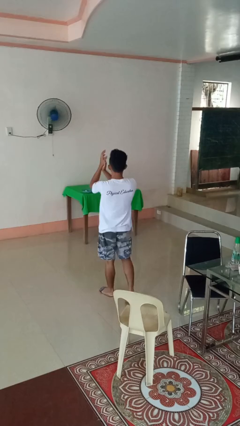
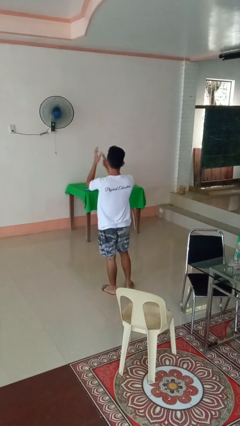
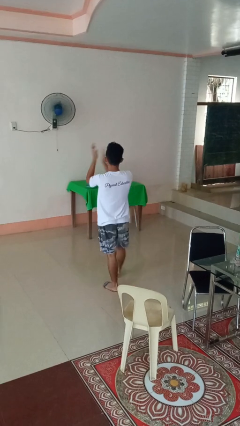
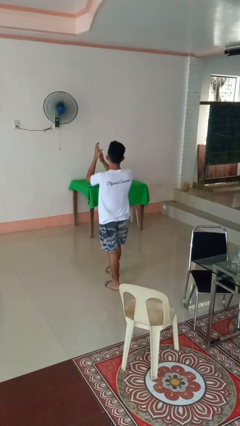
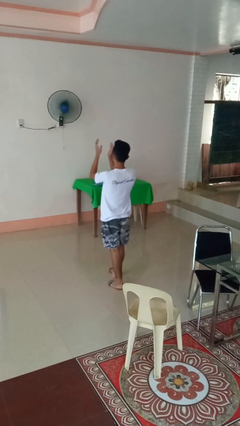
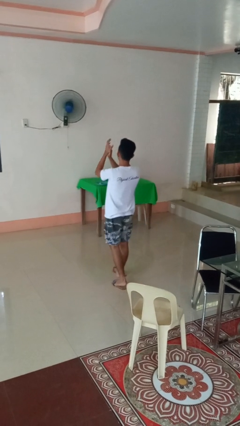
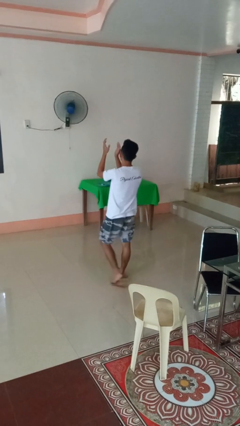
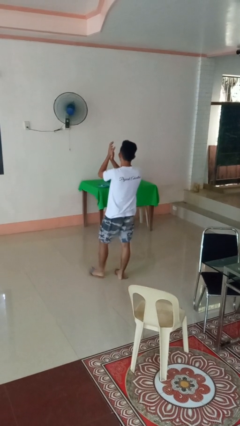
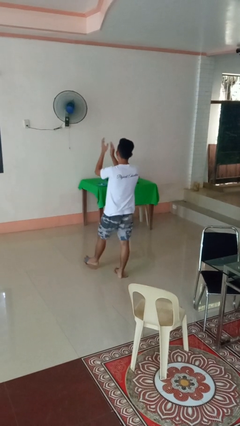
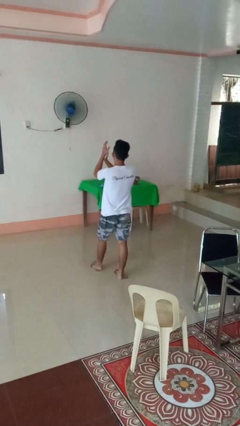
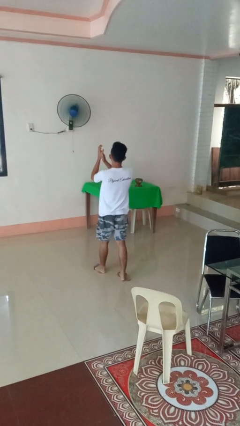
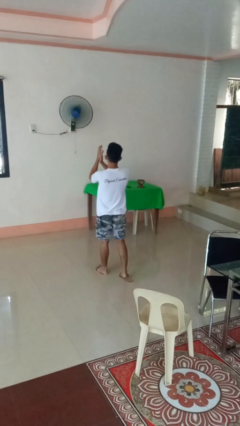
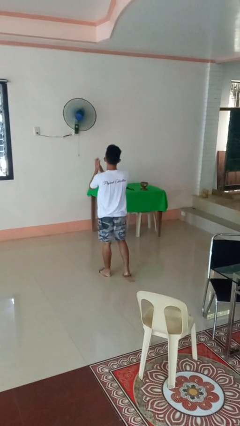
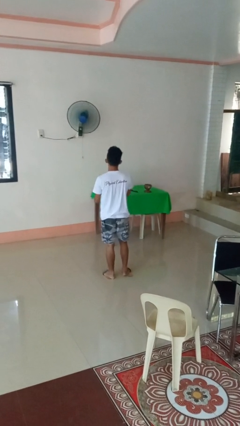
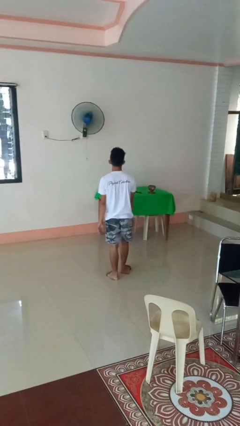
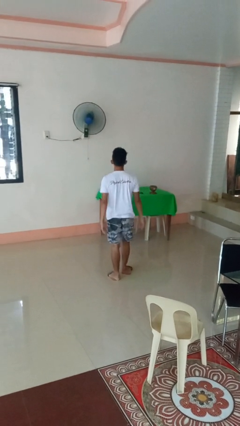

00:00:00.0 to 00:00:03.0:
person claps hands

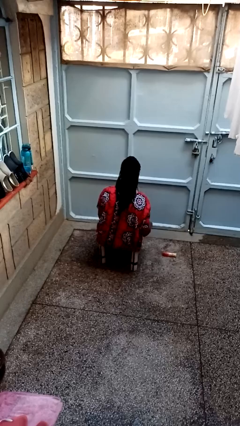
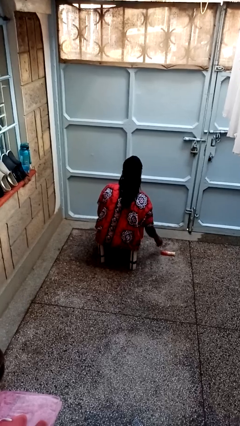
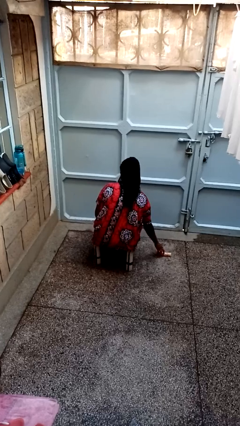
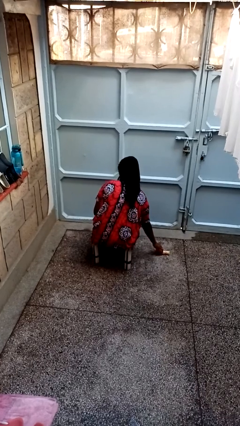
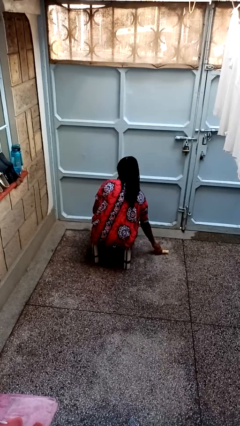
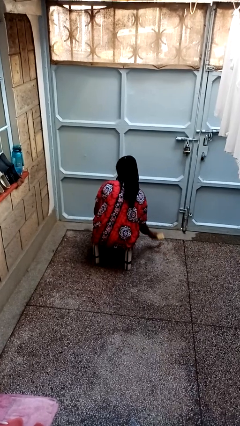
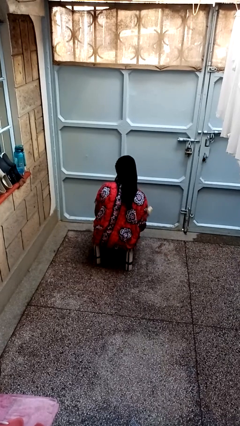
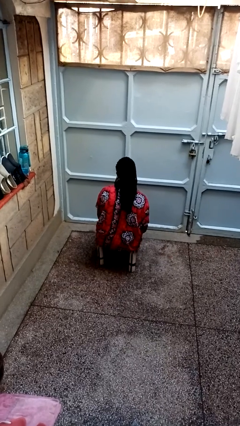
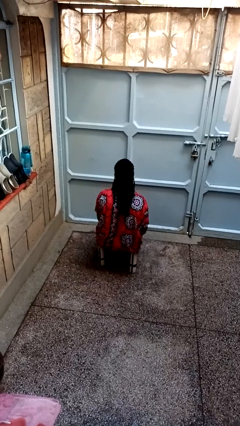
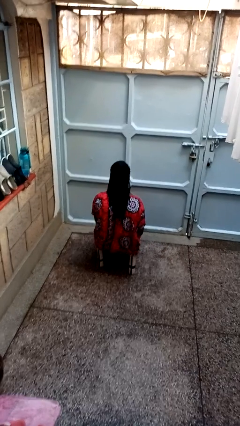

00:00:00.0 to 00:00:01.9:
person picks up object from floor

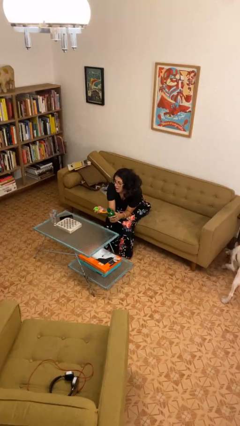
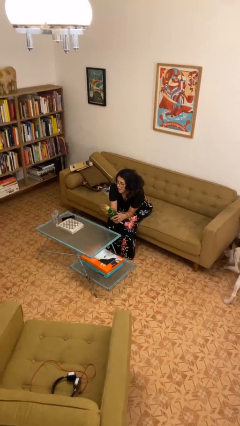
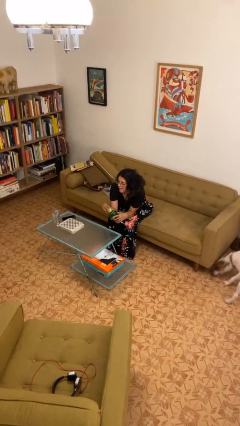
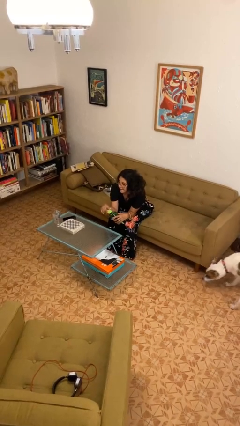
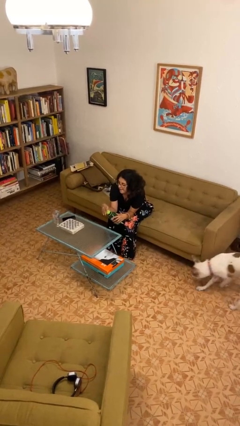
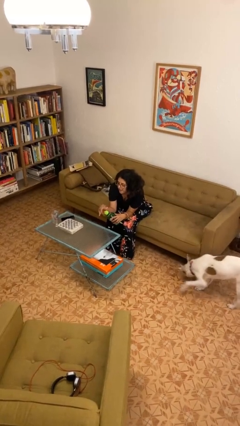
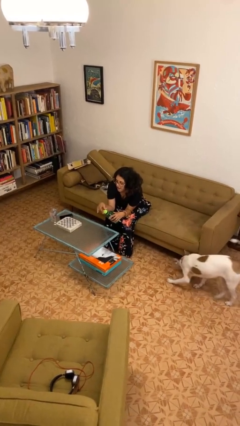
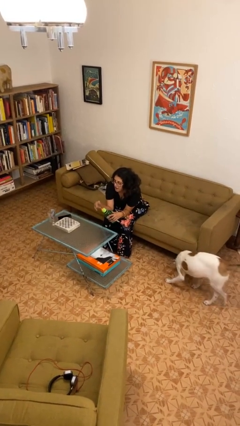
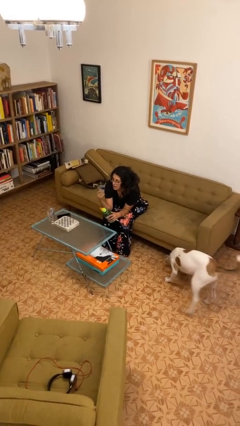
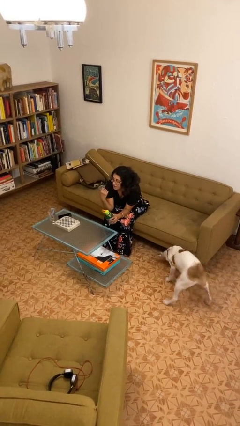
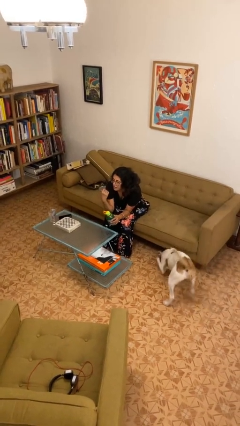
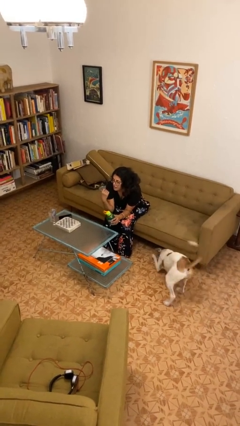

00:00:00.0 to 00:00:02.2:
person screws lid to bottle

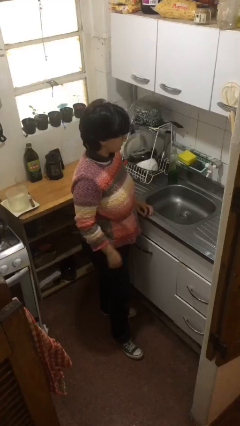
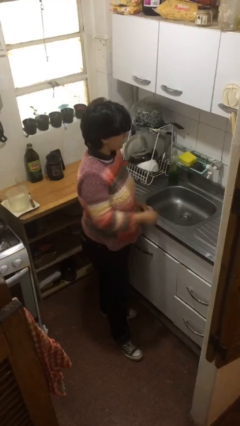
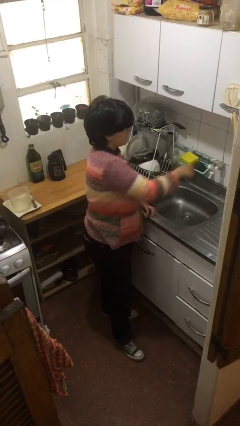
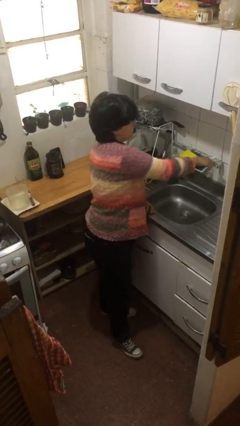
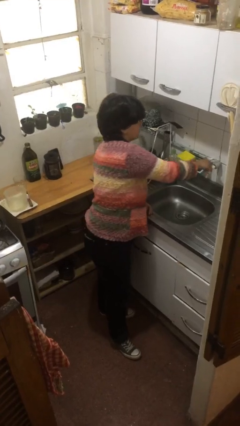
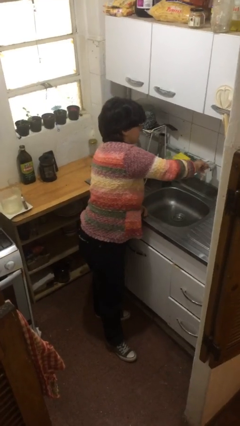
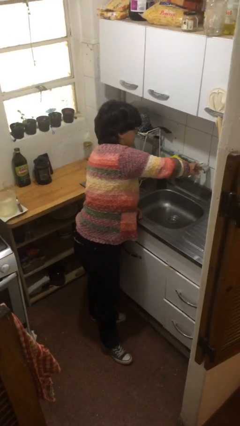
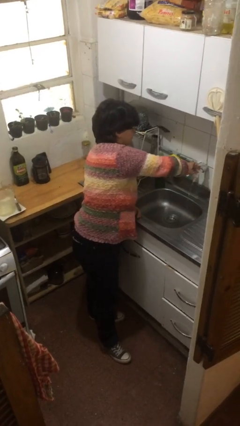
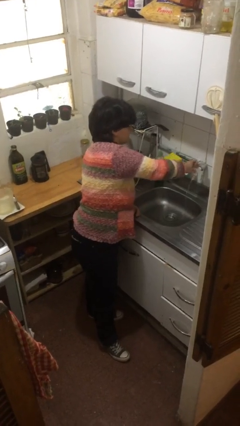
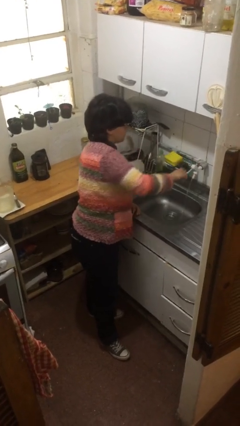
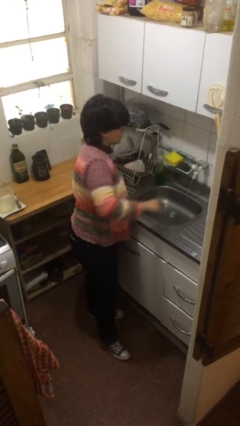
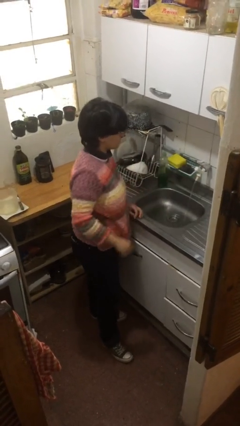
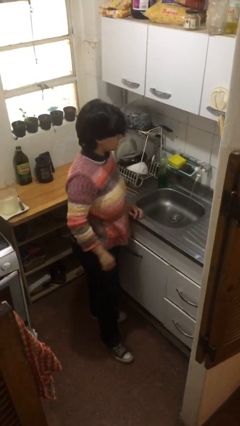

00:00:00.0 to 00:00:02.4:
person turns on faucet

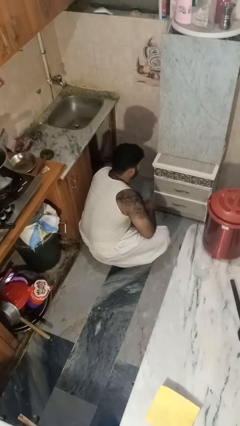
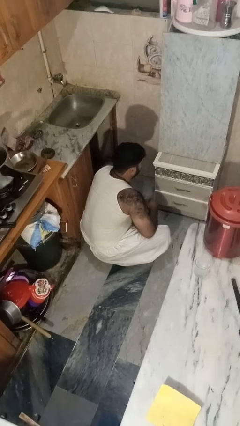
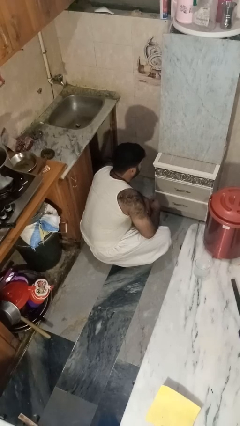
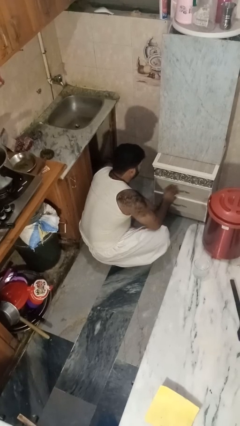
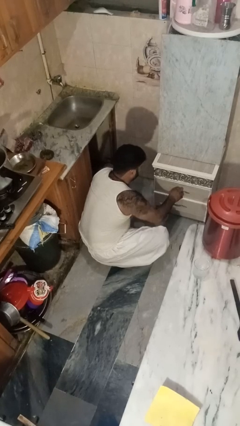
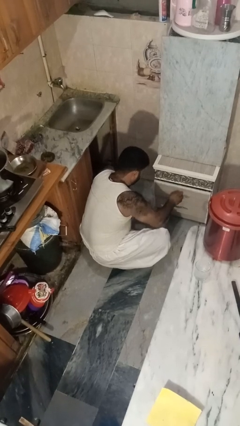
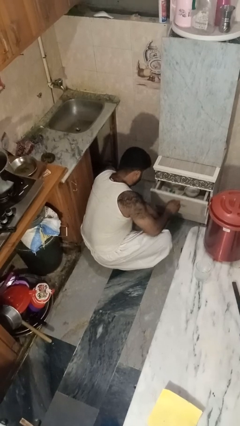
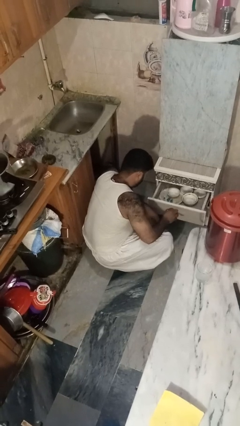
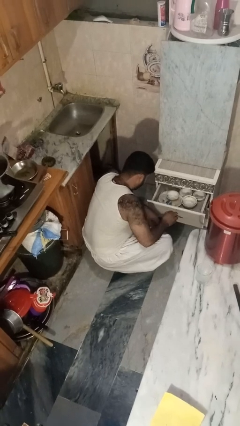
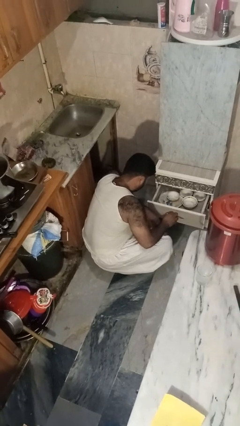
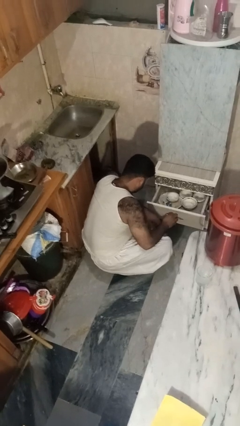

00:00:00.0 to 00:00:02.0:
person opens kitchen drawer

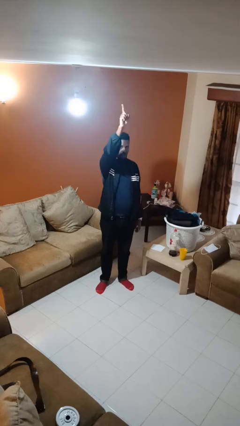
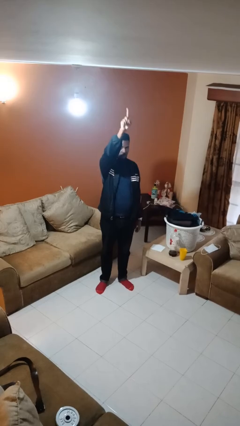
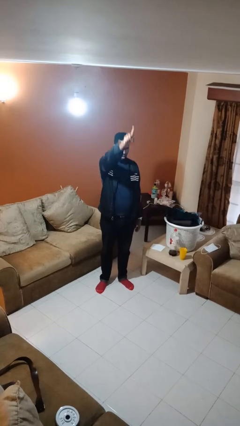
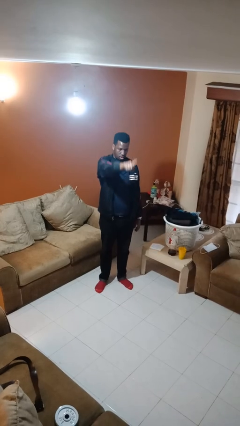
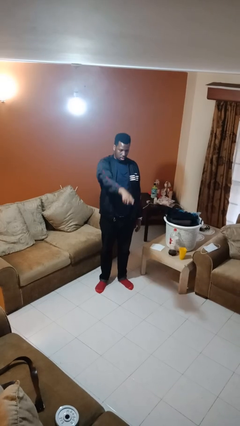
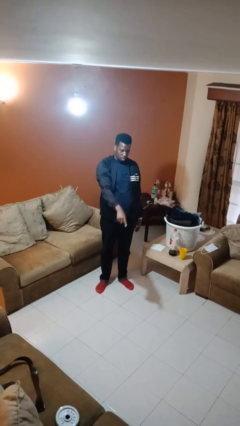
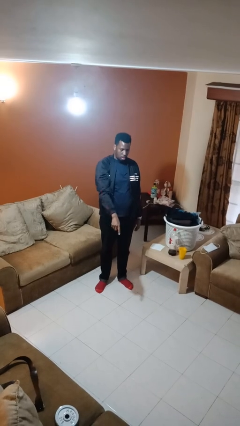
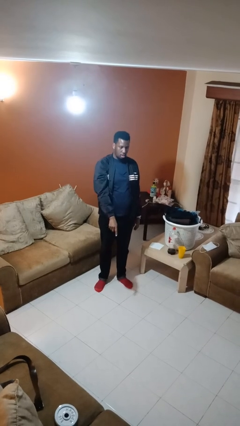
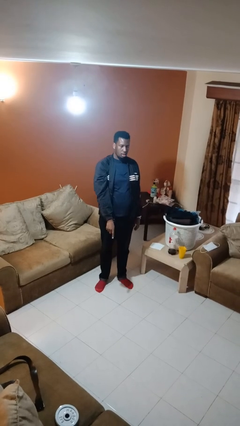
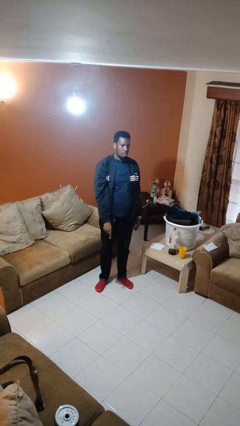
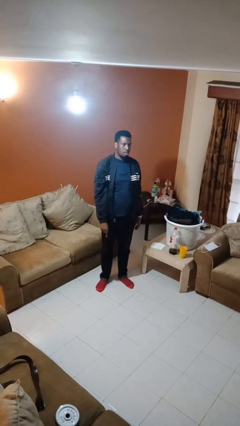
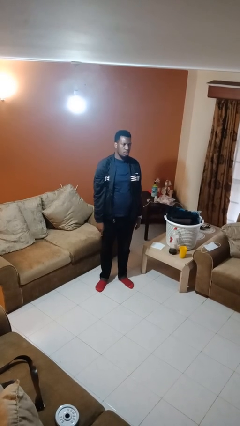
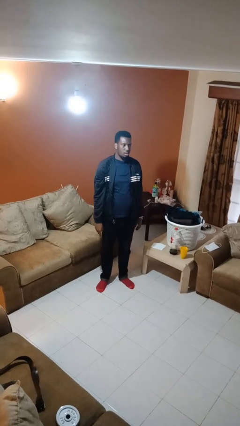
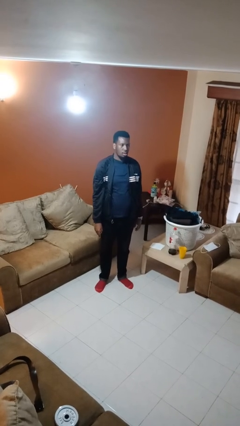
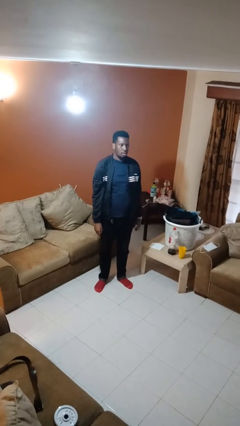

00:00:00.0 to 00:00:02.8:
person gestures swipe down

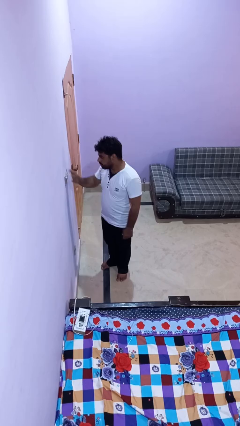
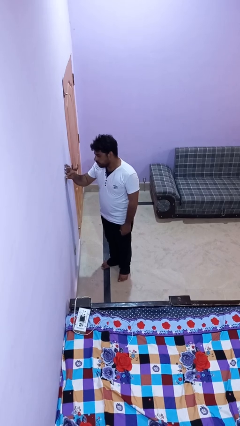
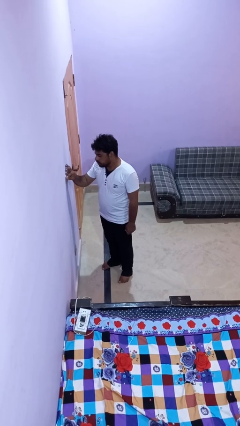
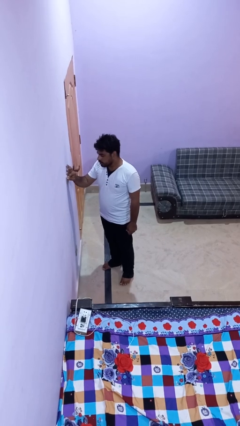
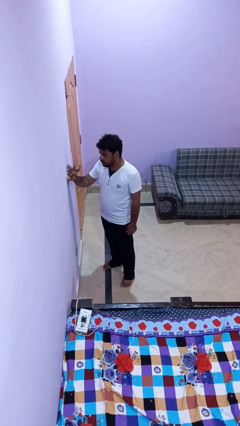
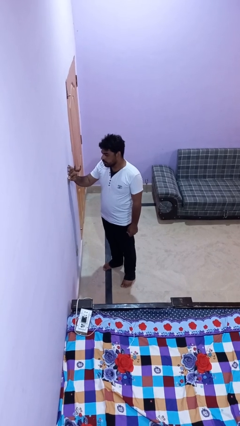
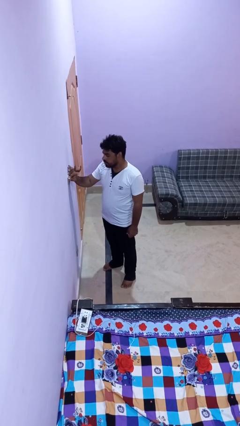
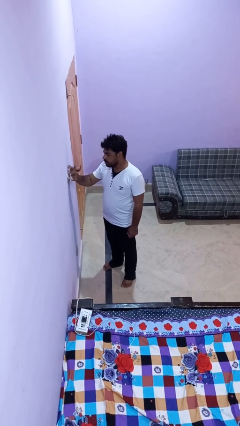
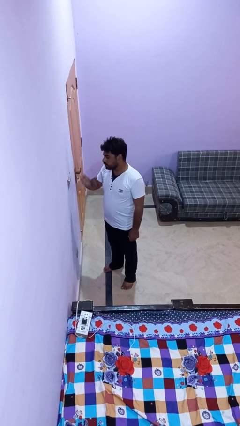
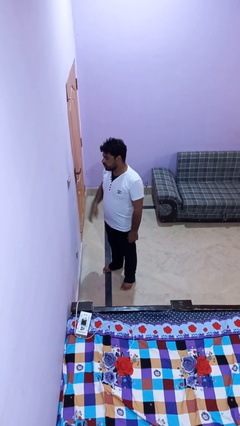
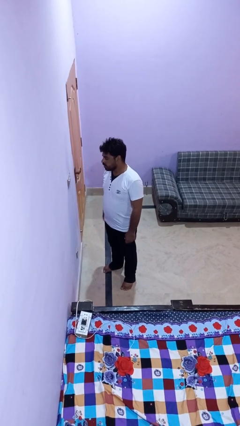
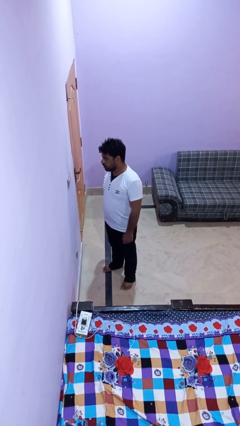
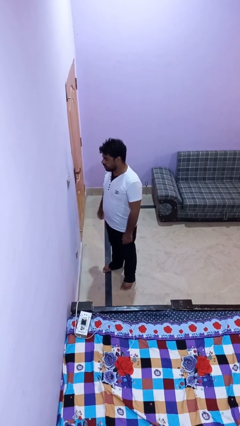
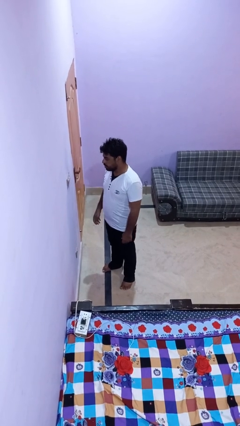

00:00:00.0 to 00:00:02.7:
person adjusts thermostat
